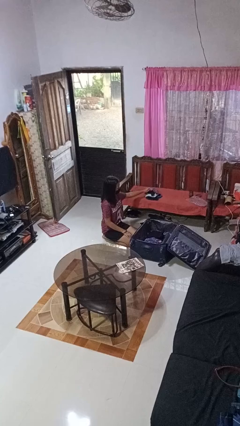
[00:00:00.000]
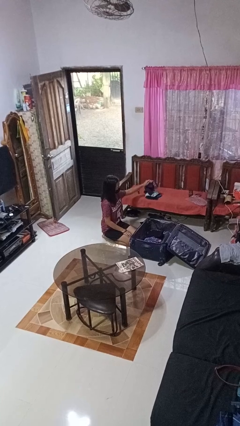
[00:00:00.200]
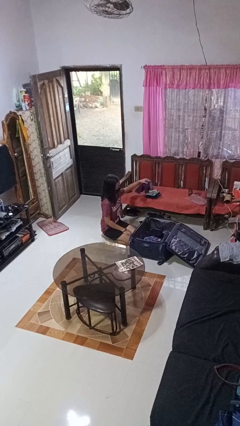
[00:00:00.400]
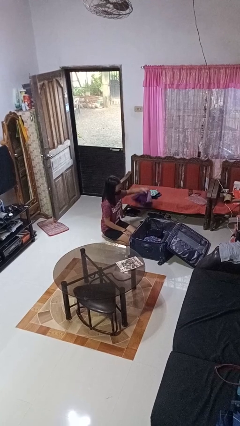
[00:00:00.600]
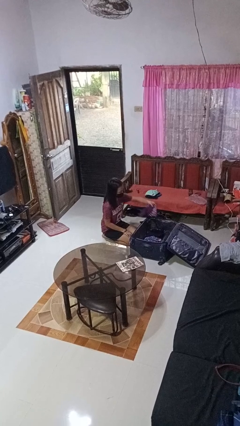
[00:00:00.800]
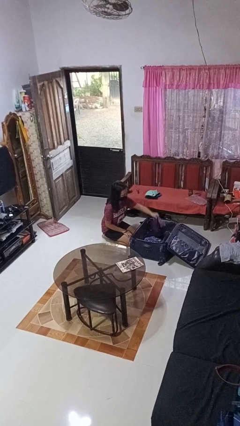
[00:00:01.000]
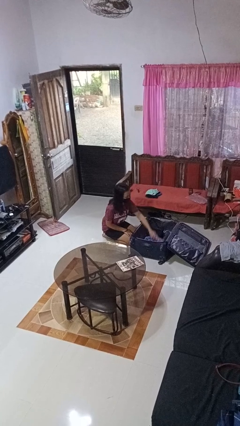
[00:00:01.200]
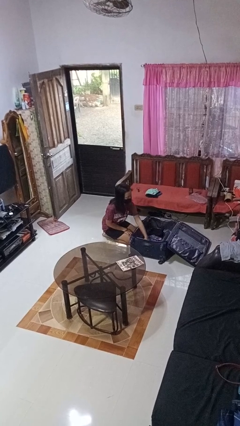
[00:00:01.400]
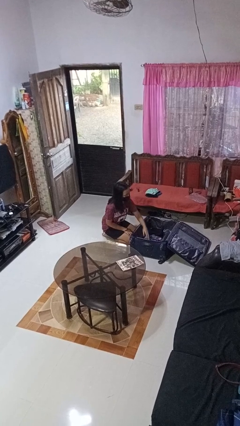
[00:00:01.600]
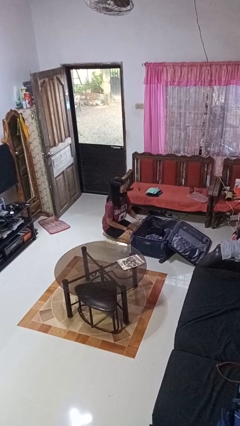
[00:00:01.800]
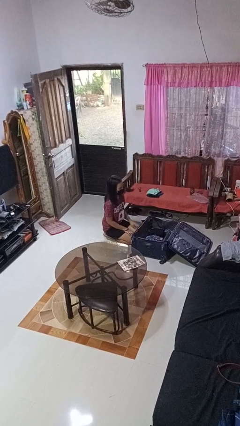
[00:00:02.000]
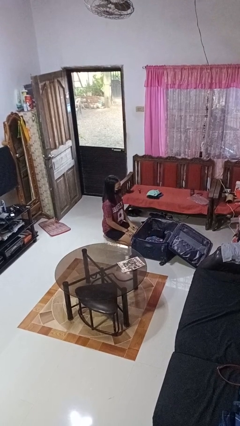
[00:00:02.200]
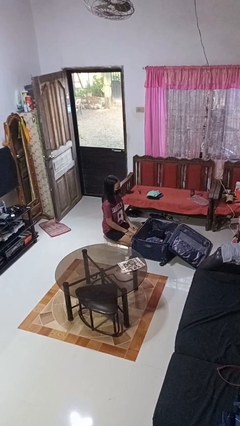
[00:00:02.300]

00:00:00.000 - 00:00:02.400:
person loads clothes into suitcase

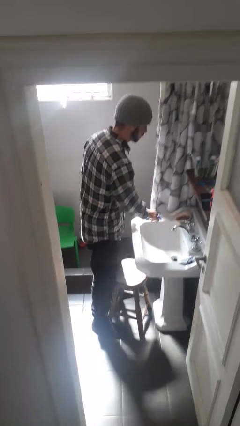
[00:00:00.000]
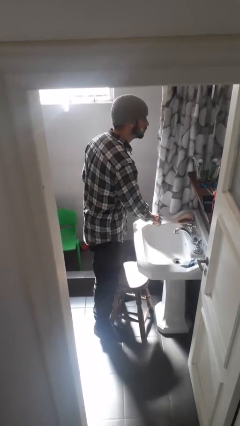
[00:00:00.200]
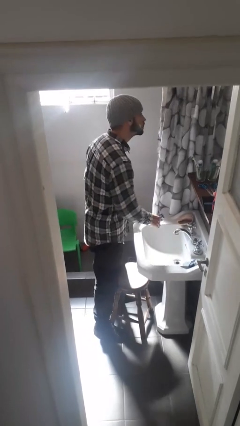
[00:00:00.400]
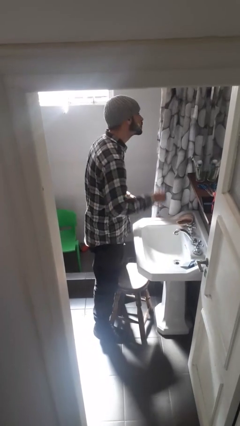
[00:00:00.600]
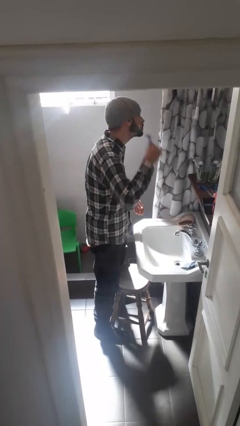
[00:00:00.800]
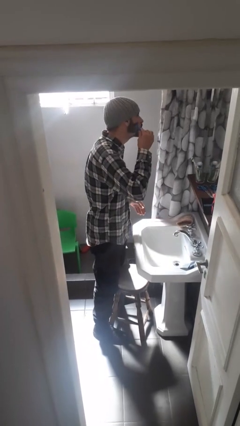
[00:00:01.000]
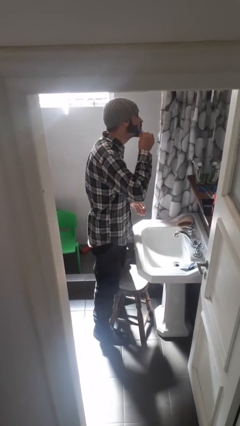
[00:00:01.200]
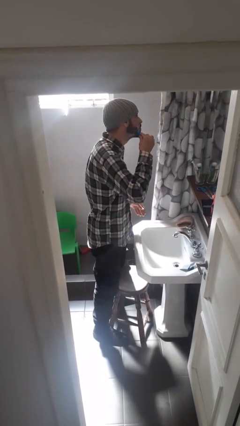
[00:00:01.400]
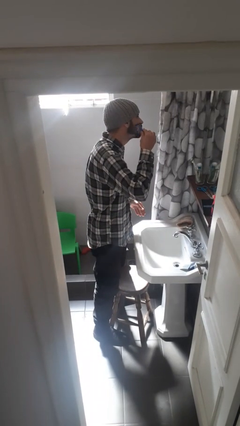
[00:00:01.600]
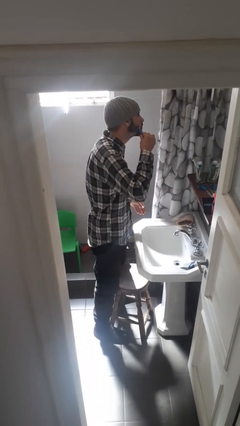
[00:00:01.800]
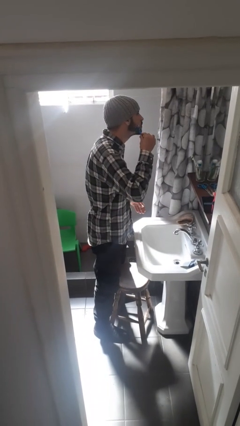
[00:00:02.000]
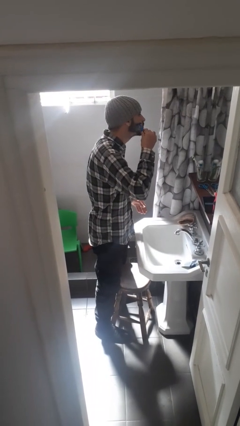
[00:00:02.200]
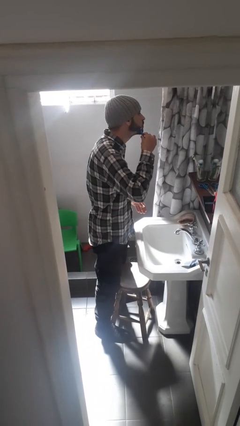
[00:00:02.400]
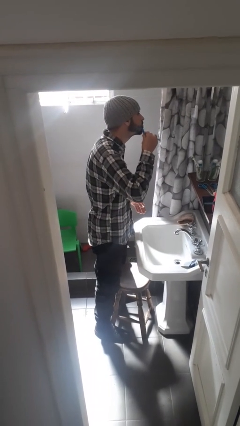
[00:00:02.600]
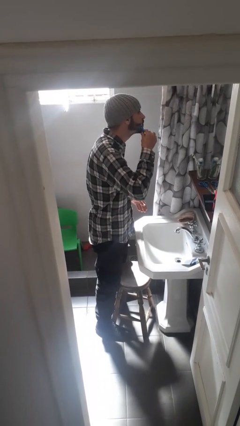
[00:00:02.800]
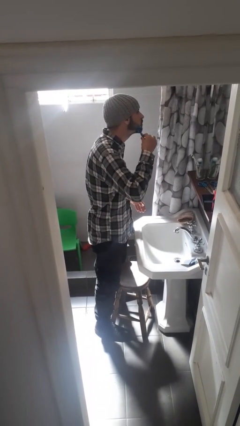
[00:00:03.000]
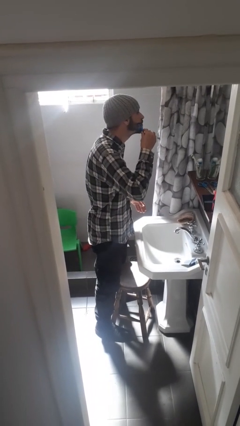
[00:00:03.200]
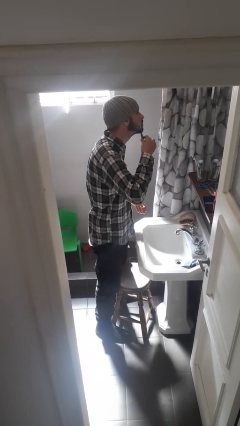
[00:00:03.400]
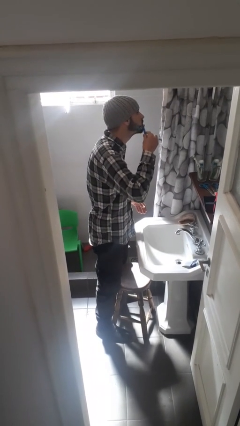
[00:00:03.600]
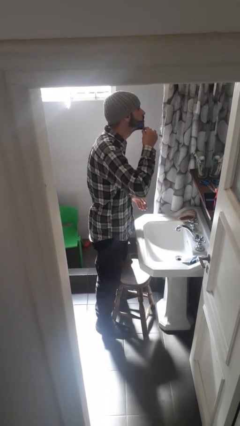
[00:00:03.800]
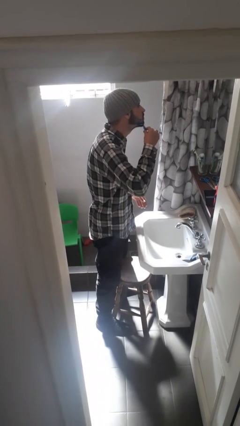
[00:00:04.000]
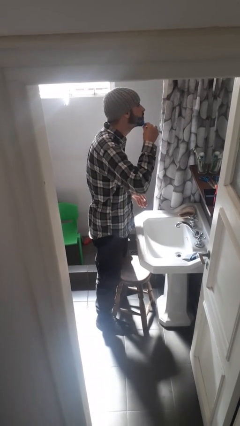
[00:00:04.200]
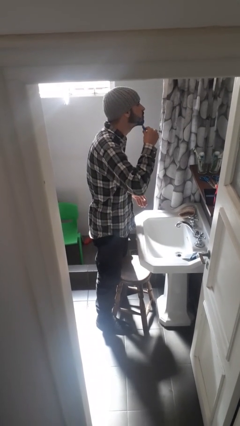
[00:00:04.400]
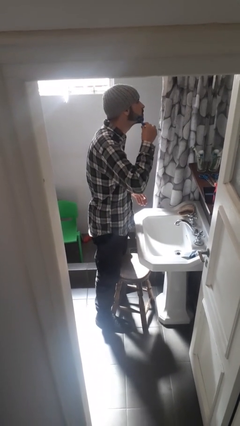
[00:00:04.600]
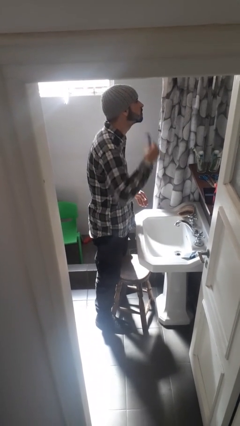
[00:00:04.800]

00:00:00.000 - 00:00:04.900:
person shaves face

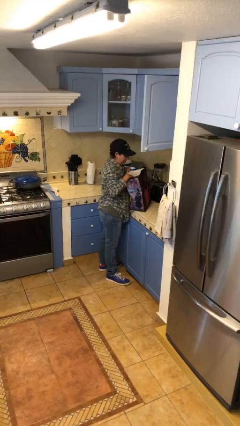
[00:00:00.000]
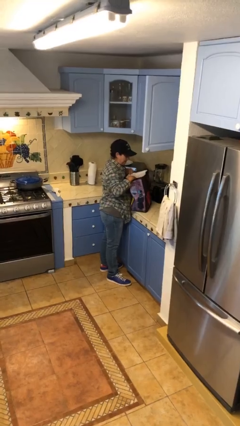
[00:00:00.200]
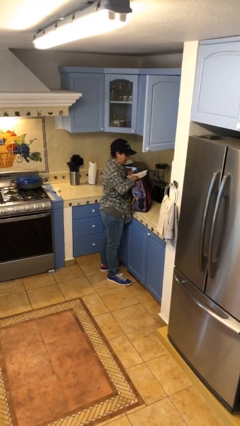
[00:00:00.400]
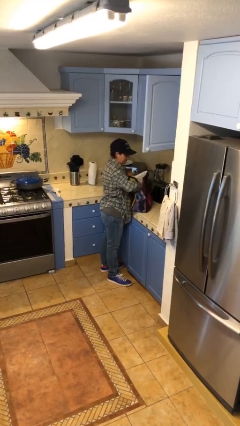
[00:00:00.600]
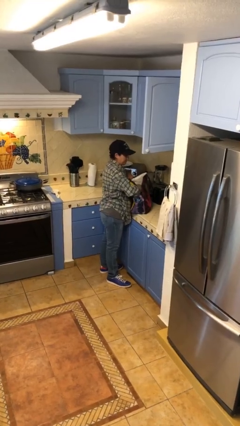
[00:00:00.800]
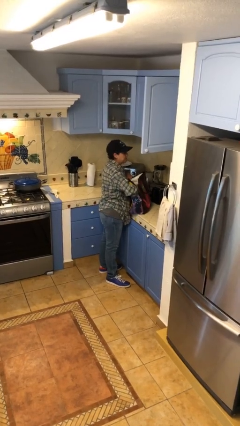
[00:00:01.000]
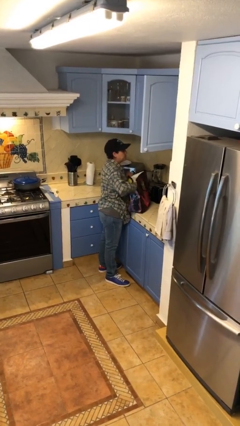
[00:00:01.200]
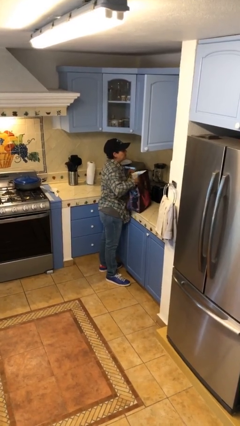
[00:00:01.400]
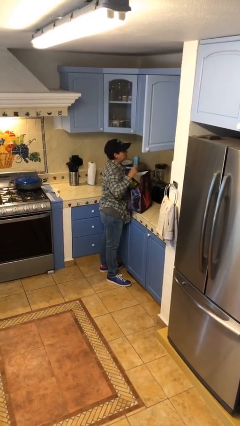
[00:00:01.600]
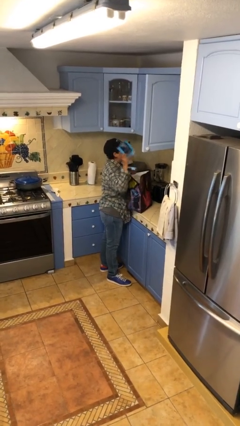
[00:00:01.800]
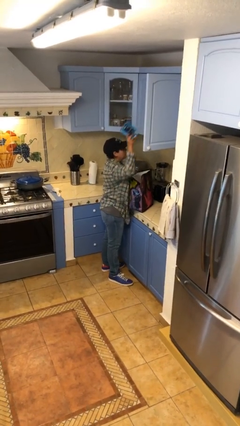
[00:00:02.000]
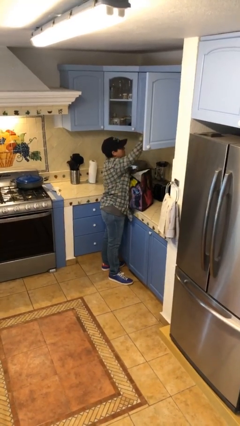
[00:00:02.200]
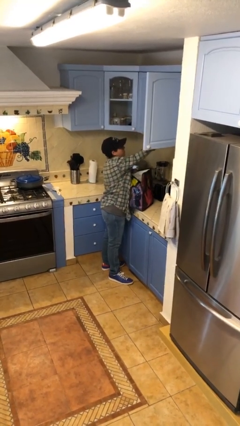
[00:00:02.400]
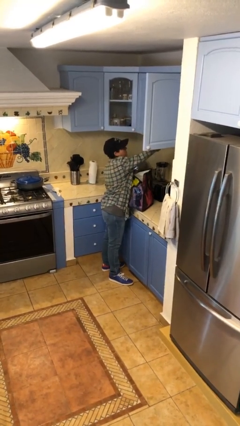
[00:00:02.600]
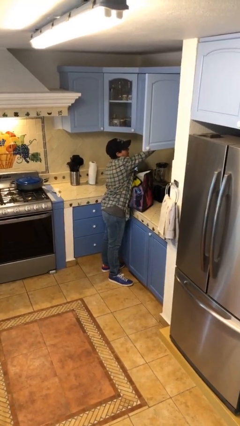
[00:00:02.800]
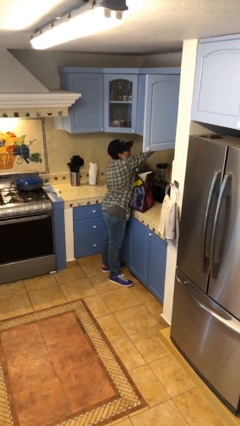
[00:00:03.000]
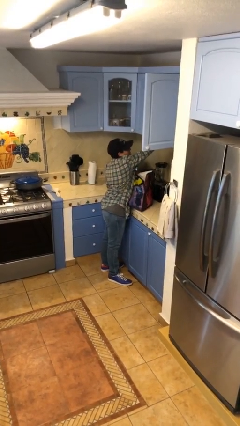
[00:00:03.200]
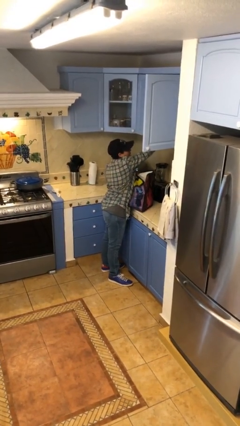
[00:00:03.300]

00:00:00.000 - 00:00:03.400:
person loads groceries into cabinet

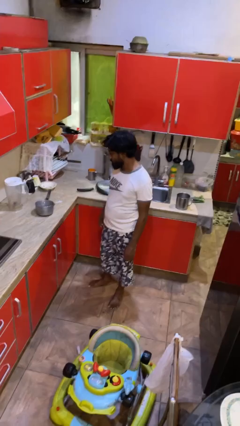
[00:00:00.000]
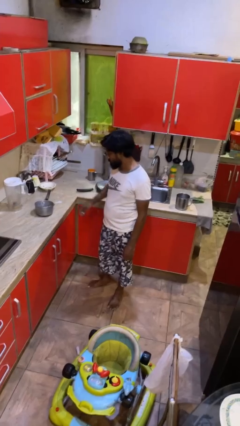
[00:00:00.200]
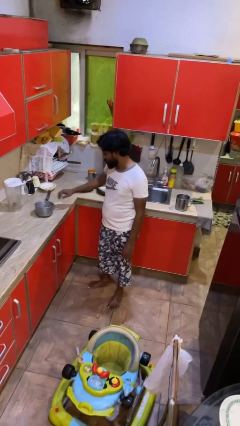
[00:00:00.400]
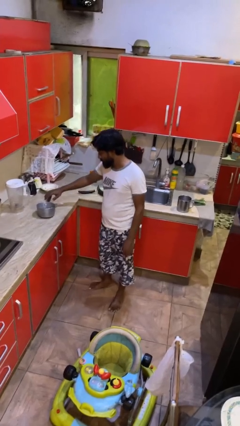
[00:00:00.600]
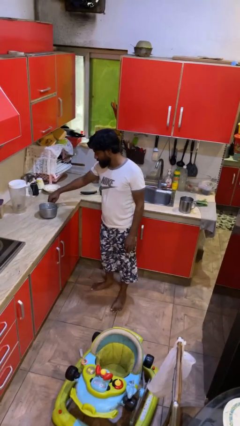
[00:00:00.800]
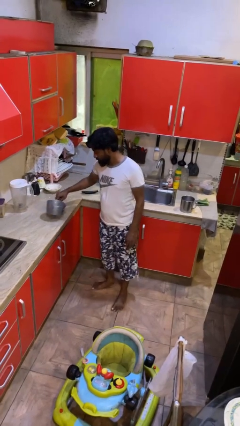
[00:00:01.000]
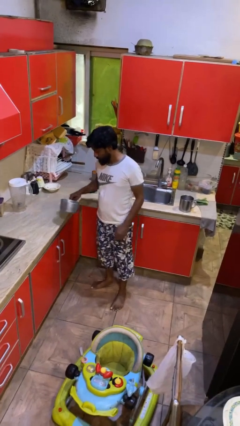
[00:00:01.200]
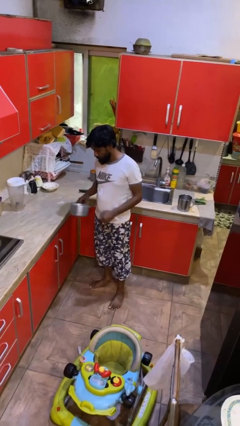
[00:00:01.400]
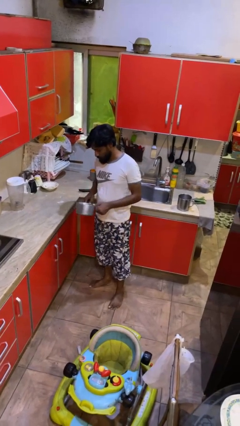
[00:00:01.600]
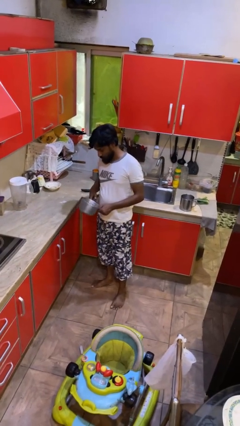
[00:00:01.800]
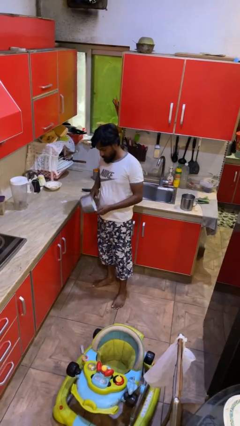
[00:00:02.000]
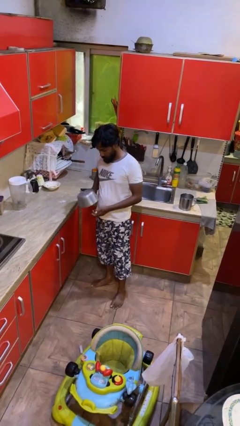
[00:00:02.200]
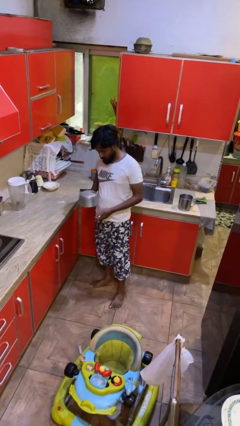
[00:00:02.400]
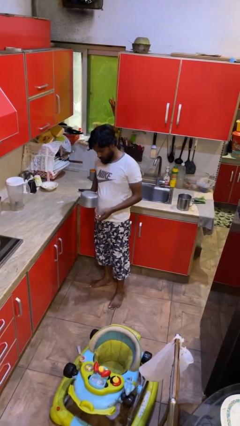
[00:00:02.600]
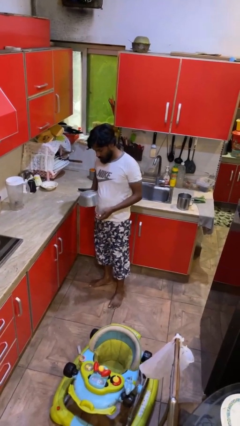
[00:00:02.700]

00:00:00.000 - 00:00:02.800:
person picks up object from countertop

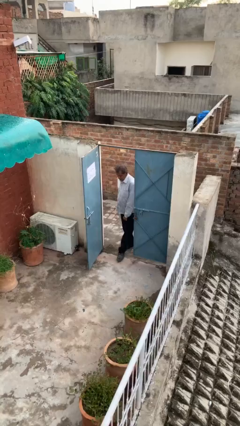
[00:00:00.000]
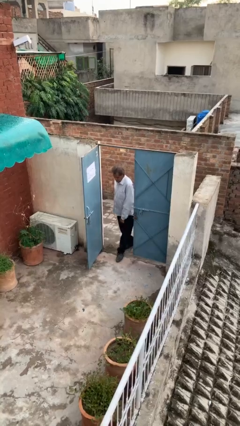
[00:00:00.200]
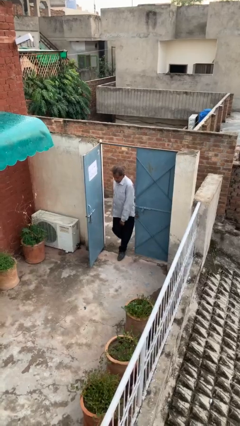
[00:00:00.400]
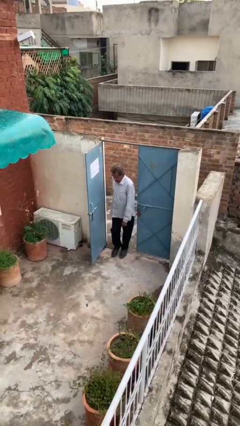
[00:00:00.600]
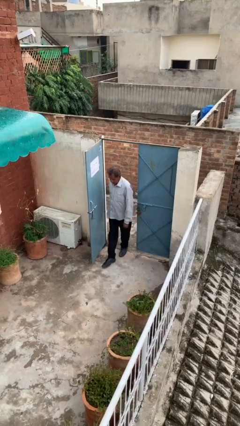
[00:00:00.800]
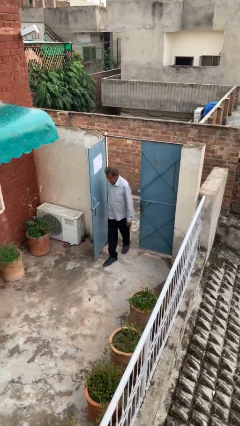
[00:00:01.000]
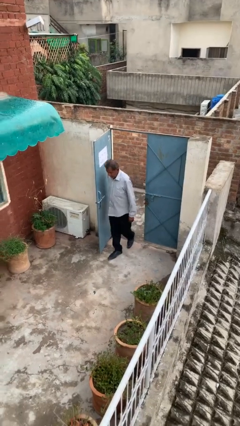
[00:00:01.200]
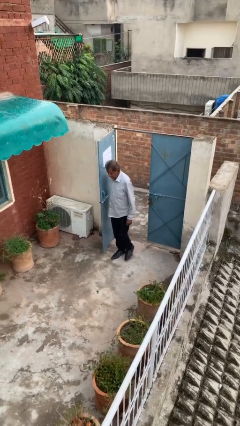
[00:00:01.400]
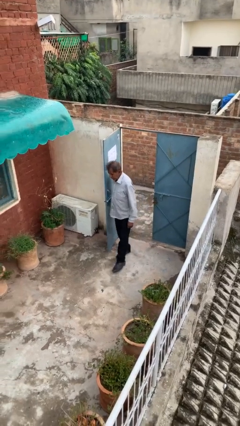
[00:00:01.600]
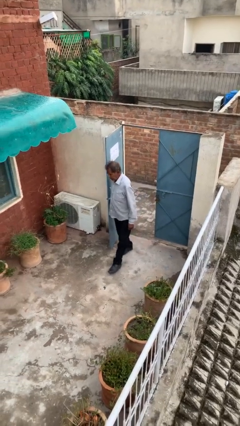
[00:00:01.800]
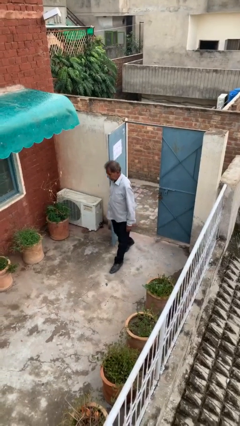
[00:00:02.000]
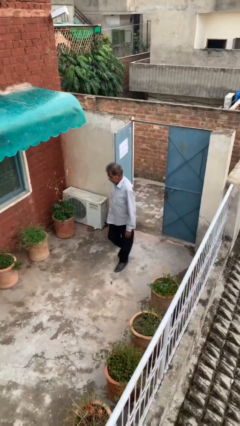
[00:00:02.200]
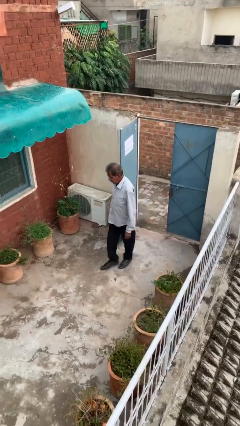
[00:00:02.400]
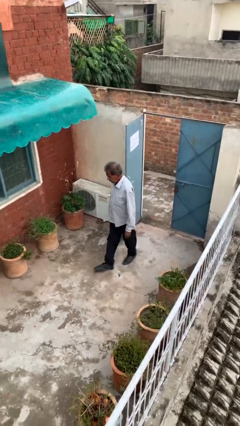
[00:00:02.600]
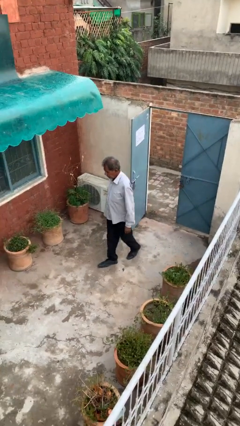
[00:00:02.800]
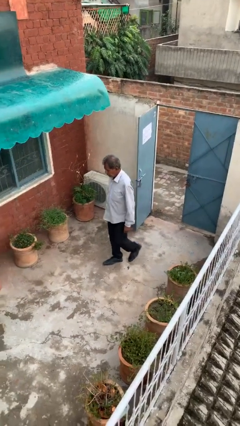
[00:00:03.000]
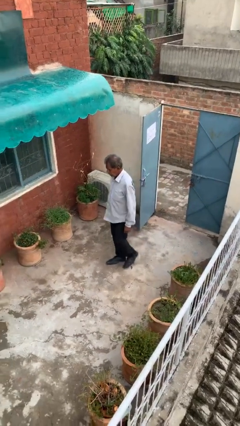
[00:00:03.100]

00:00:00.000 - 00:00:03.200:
person enters scene through structure

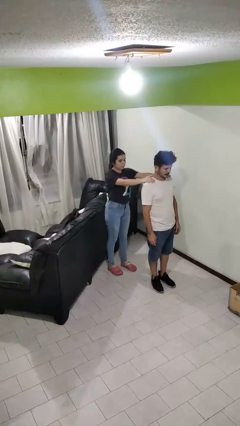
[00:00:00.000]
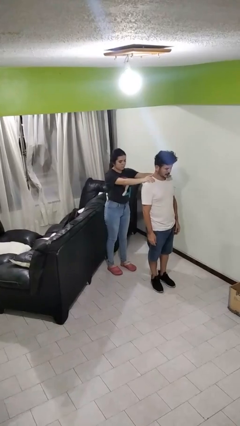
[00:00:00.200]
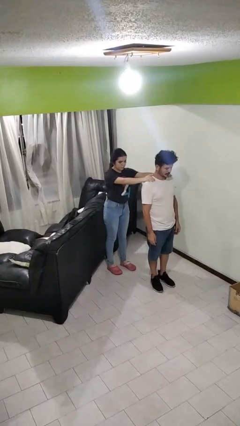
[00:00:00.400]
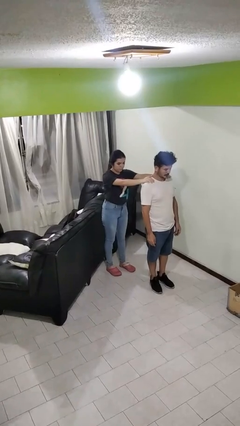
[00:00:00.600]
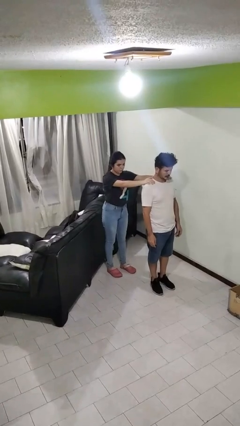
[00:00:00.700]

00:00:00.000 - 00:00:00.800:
person grabs person by shoulder
